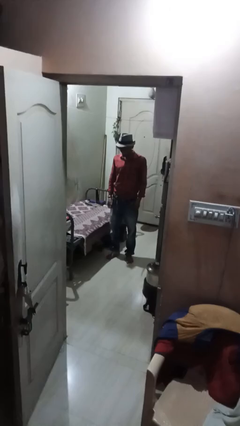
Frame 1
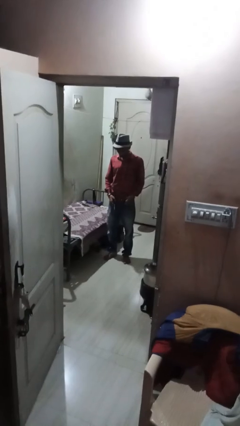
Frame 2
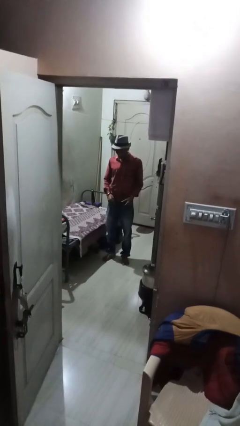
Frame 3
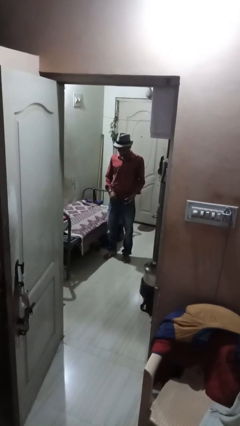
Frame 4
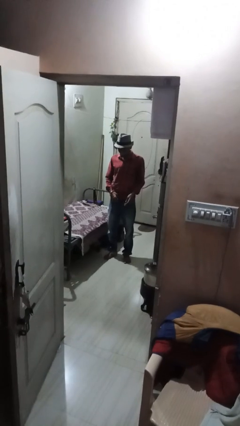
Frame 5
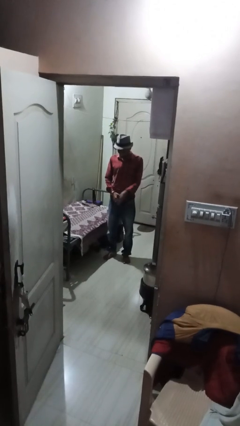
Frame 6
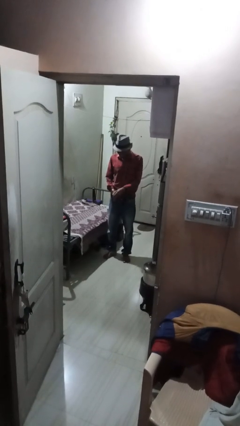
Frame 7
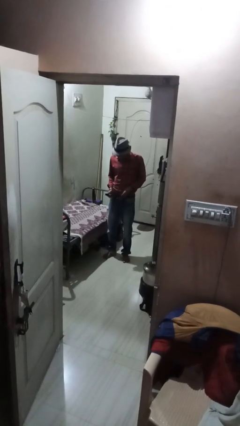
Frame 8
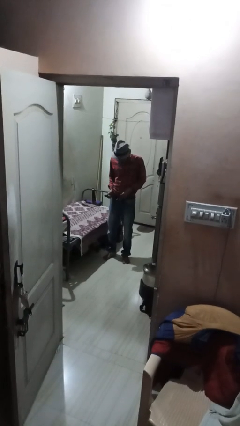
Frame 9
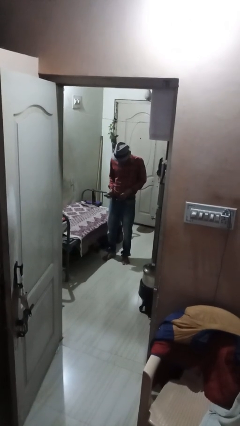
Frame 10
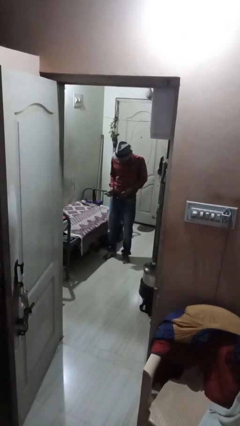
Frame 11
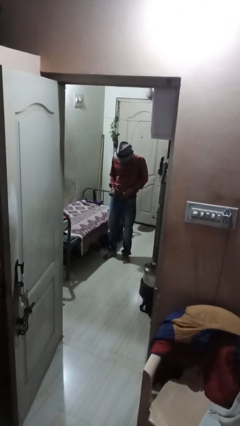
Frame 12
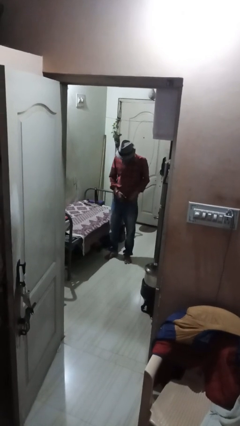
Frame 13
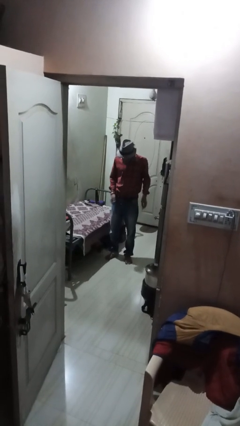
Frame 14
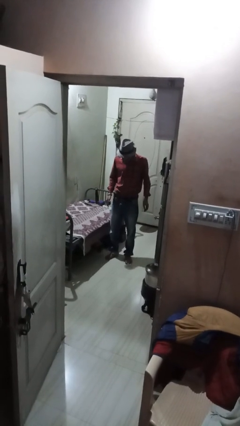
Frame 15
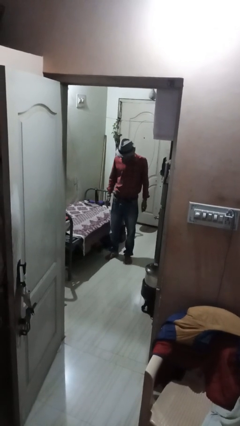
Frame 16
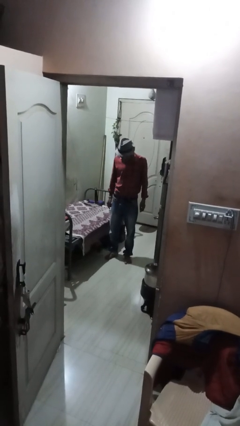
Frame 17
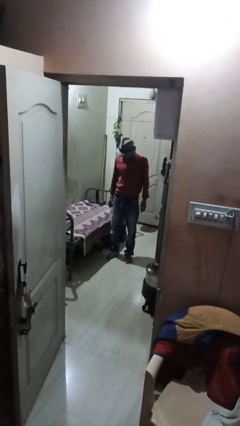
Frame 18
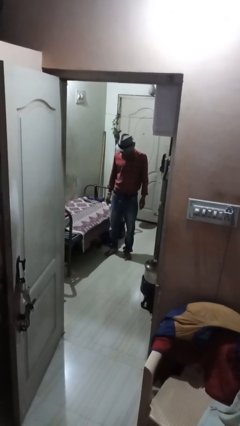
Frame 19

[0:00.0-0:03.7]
person puts on belt

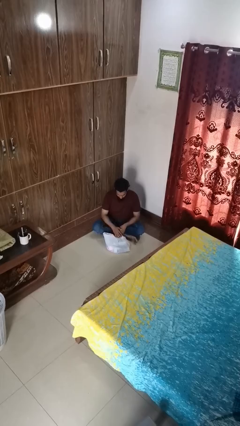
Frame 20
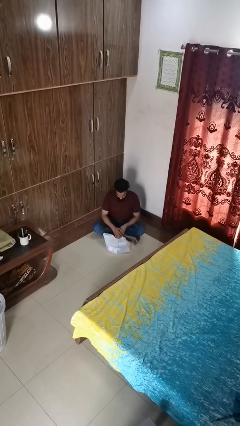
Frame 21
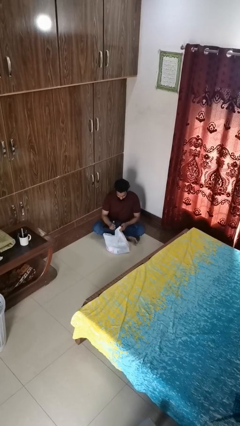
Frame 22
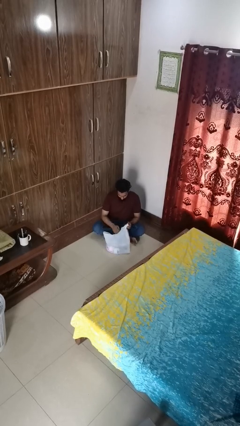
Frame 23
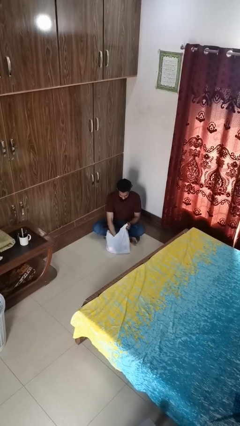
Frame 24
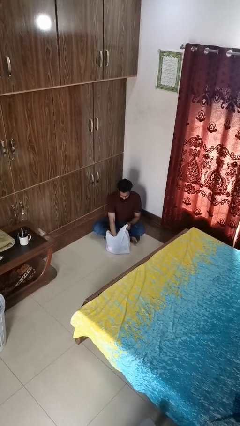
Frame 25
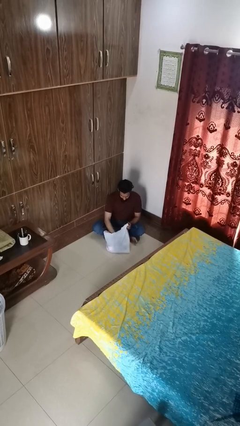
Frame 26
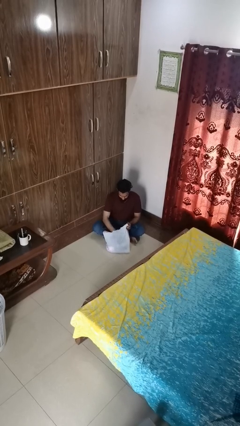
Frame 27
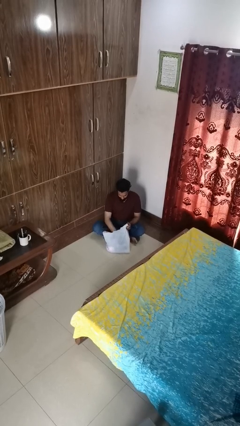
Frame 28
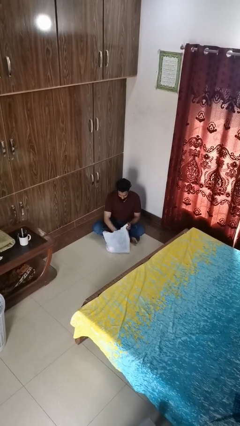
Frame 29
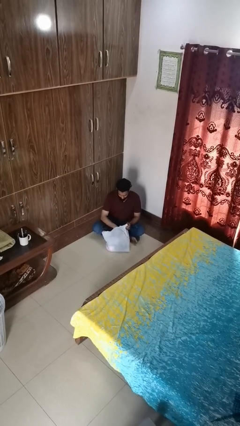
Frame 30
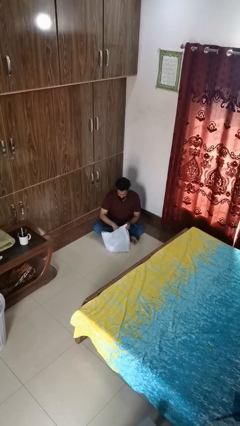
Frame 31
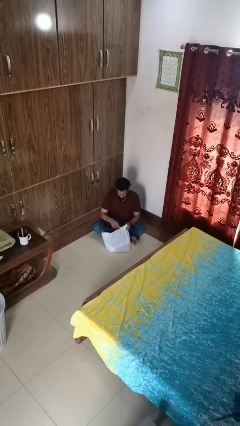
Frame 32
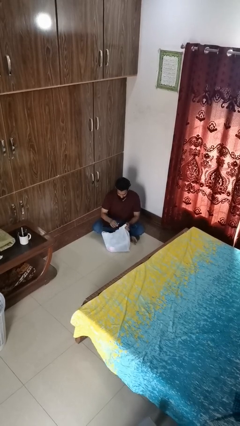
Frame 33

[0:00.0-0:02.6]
person searches in bag

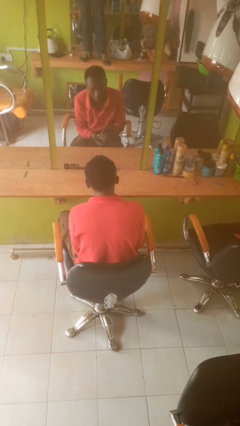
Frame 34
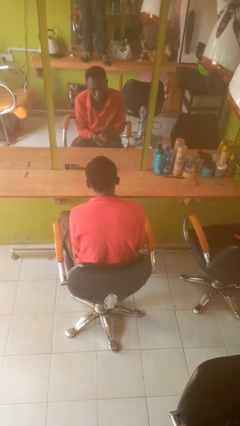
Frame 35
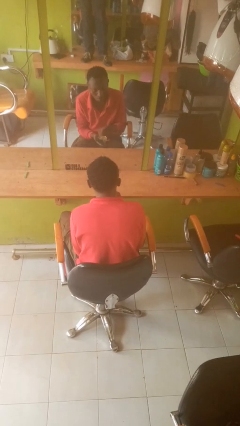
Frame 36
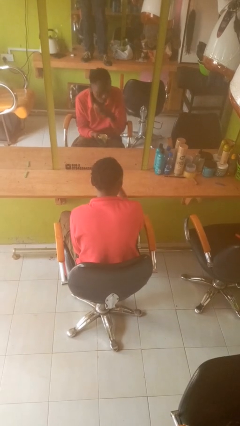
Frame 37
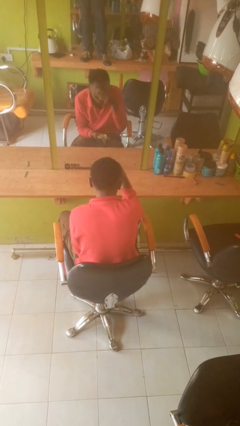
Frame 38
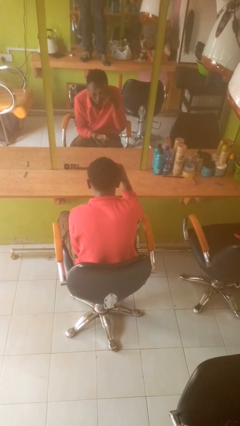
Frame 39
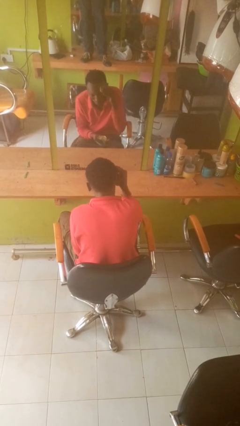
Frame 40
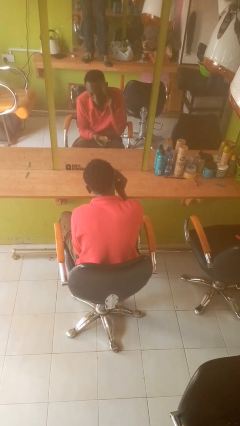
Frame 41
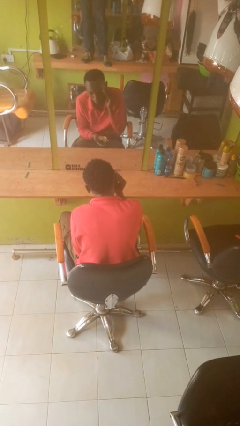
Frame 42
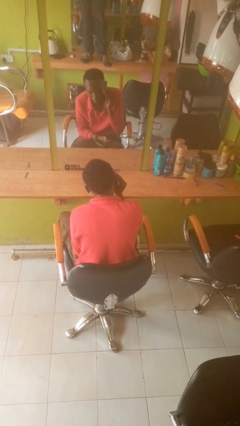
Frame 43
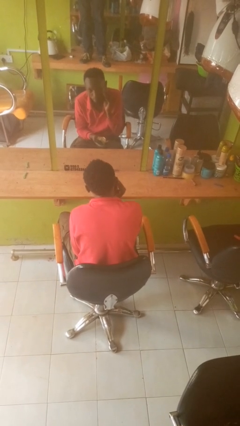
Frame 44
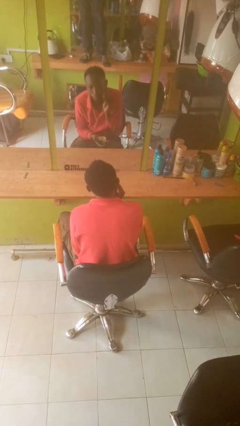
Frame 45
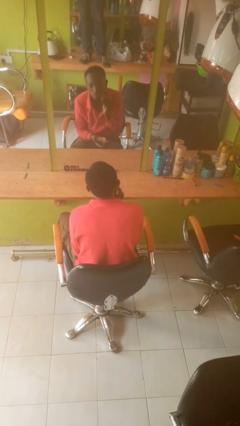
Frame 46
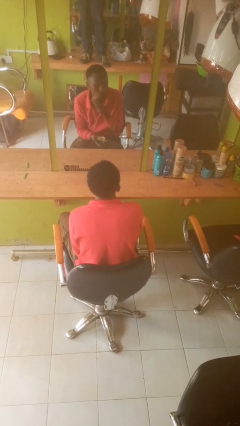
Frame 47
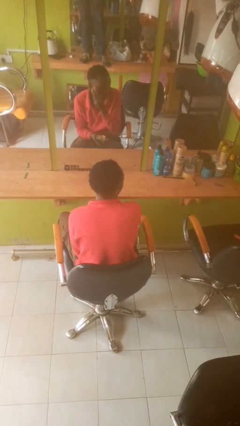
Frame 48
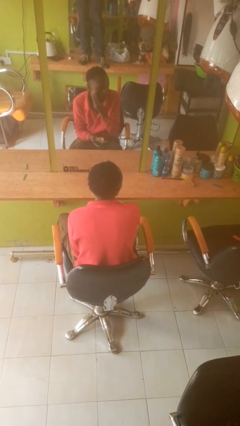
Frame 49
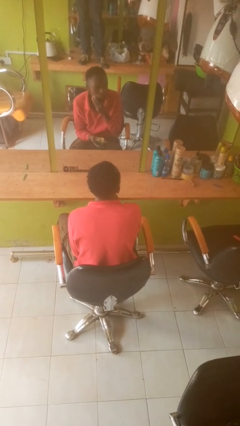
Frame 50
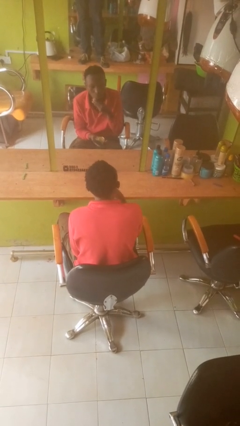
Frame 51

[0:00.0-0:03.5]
person applies foundation makeup

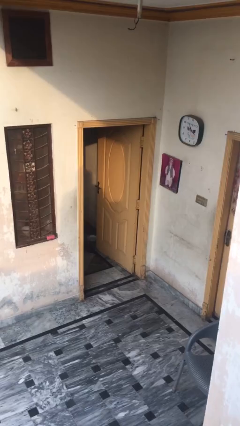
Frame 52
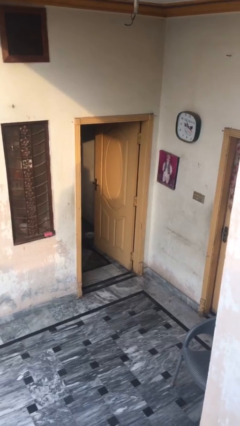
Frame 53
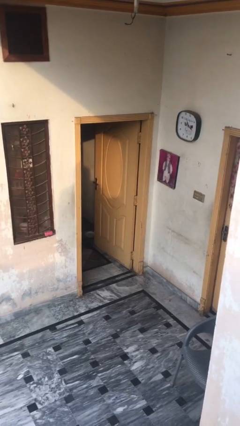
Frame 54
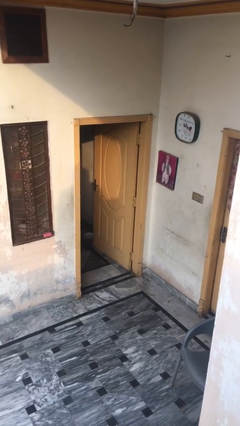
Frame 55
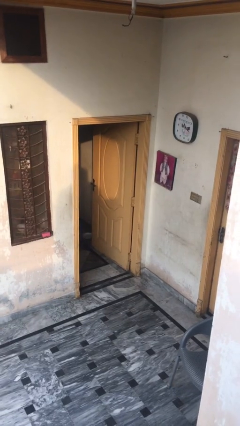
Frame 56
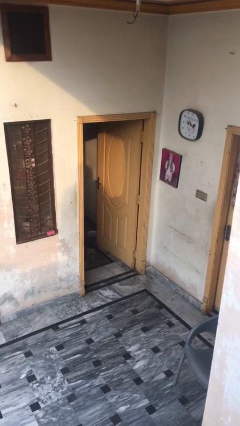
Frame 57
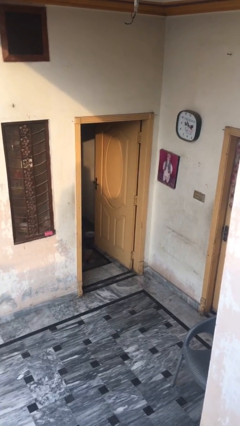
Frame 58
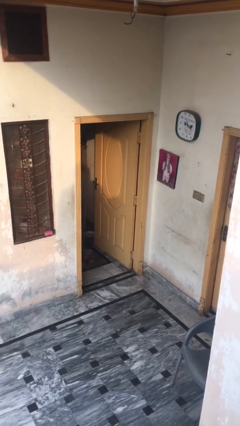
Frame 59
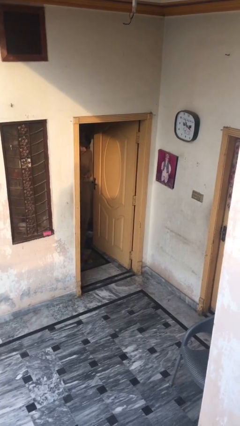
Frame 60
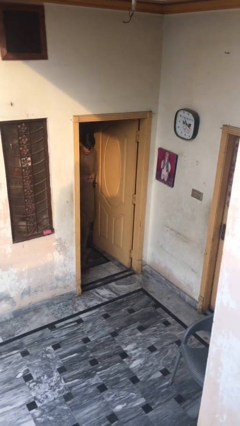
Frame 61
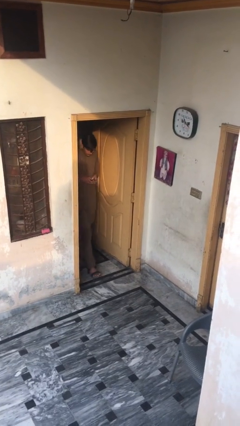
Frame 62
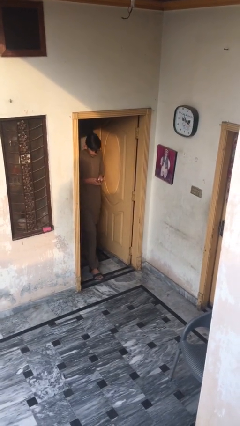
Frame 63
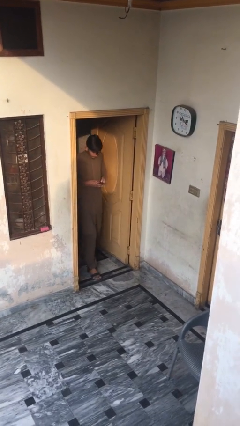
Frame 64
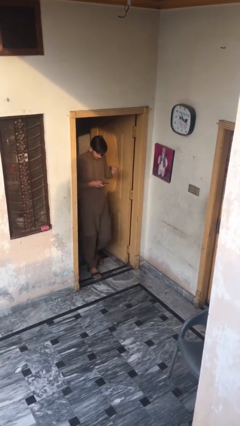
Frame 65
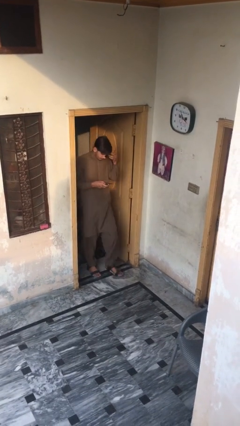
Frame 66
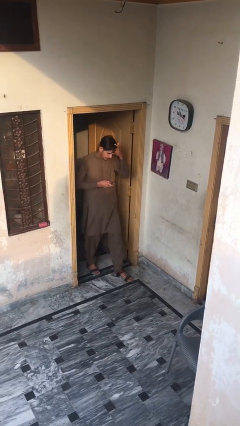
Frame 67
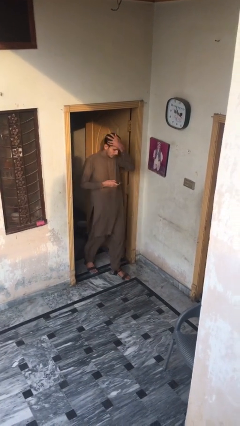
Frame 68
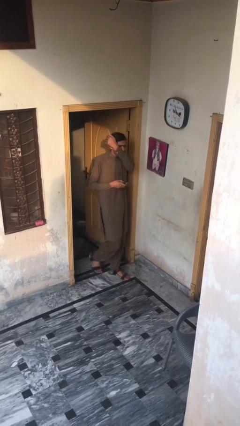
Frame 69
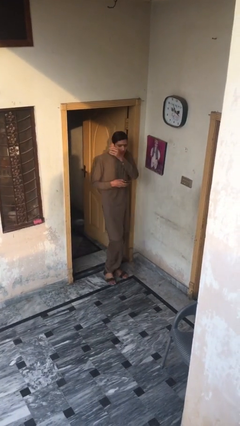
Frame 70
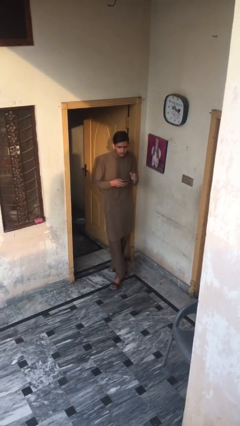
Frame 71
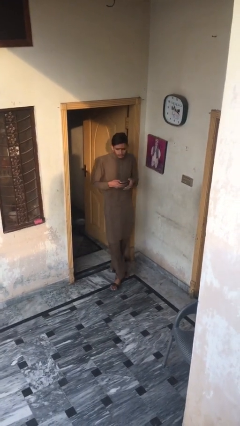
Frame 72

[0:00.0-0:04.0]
person enters scene through structure

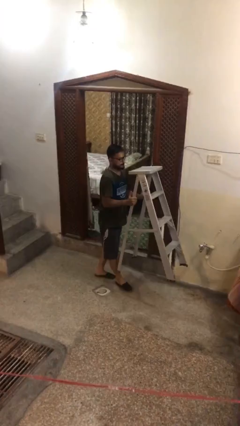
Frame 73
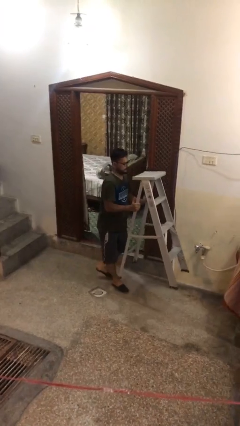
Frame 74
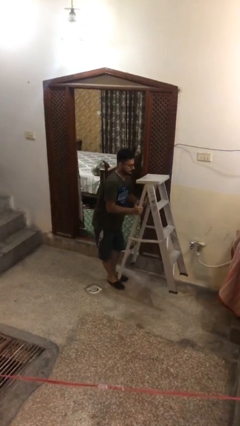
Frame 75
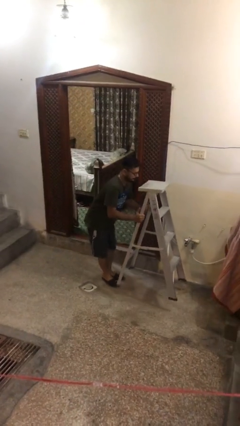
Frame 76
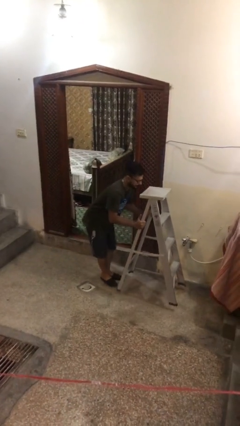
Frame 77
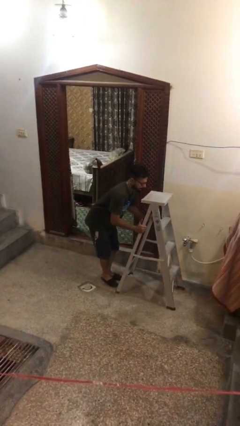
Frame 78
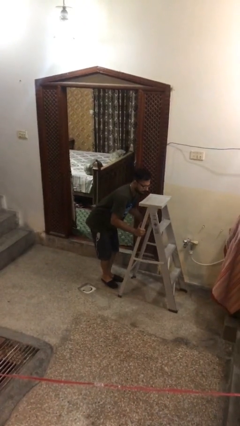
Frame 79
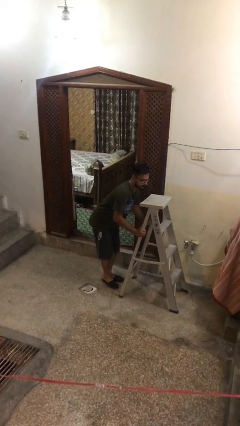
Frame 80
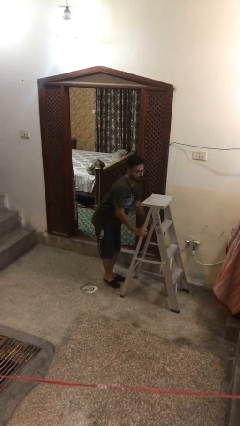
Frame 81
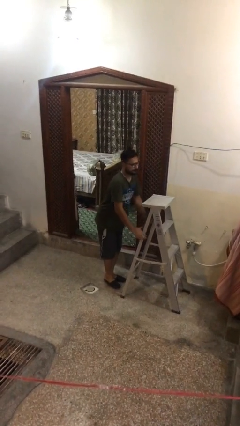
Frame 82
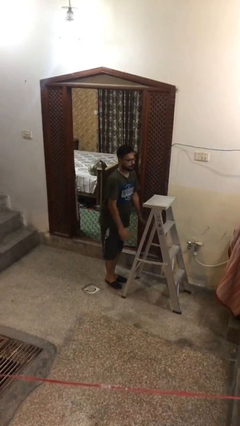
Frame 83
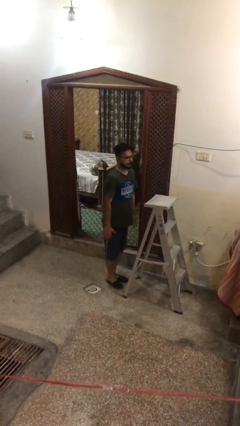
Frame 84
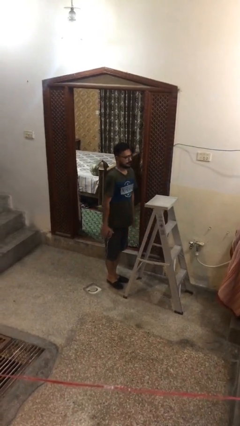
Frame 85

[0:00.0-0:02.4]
person puts down object on floor

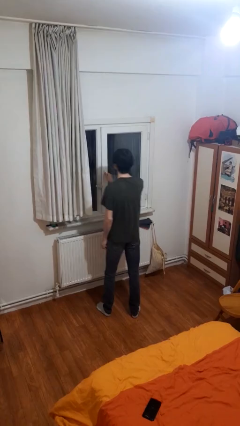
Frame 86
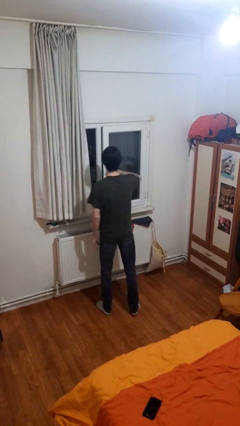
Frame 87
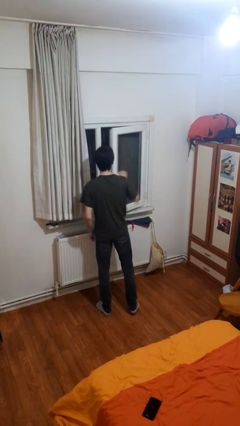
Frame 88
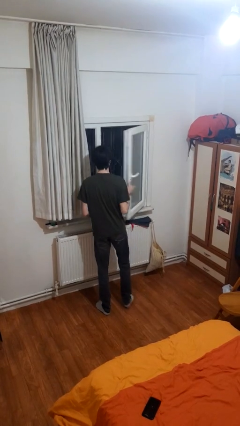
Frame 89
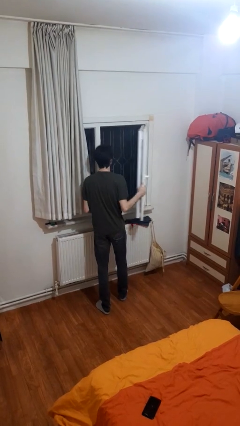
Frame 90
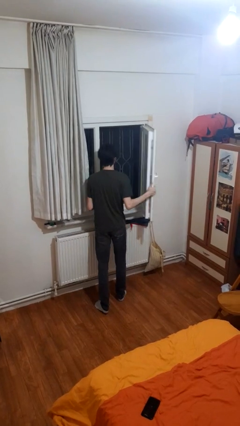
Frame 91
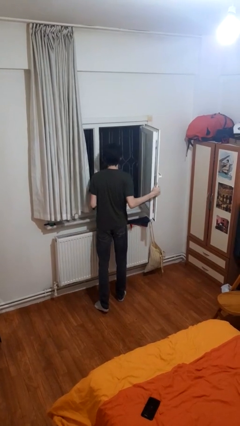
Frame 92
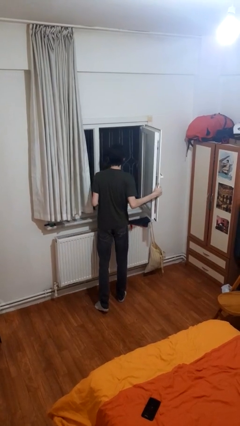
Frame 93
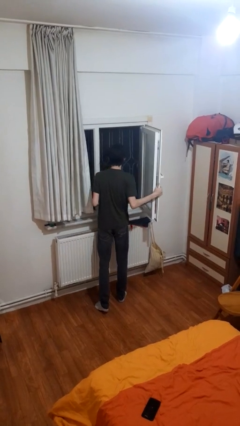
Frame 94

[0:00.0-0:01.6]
person opens home window
